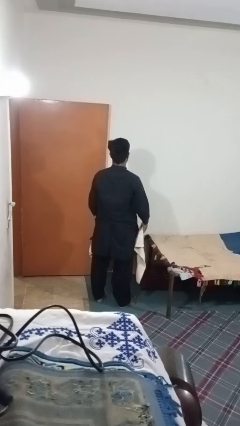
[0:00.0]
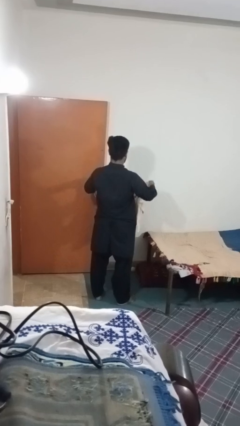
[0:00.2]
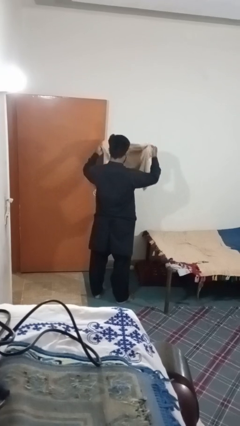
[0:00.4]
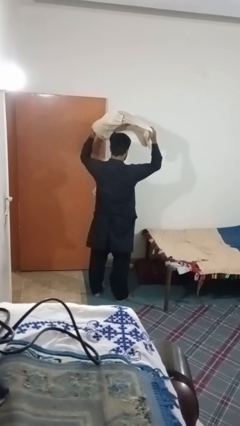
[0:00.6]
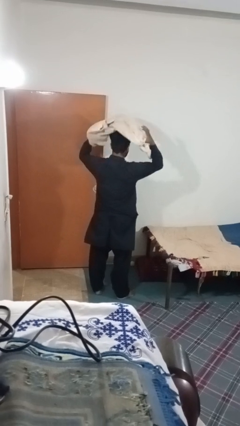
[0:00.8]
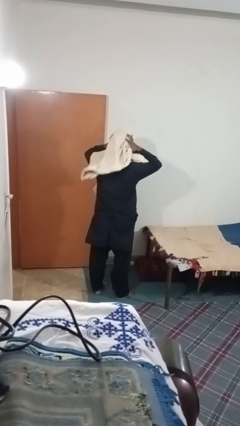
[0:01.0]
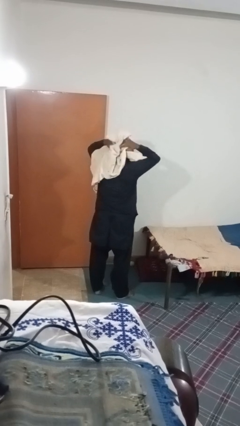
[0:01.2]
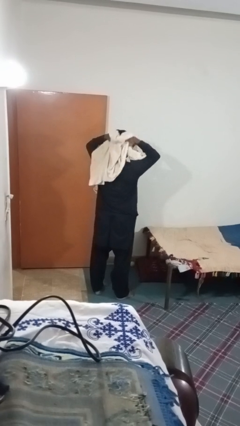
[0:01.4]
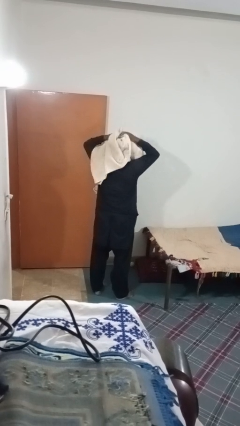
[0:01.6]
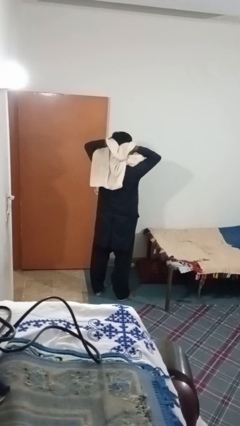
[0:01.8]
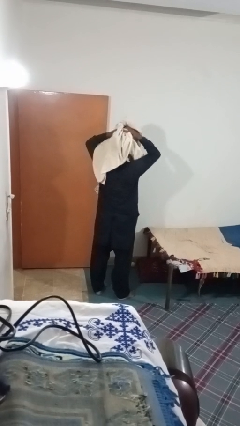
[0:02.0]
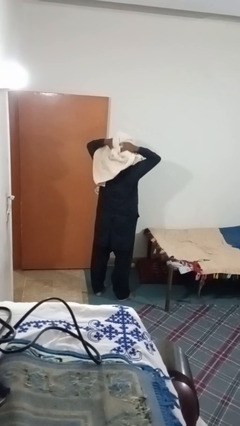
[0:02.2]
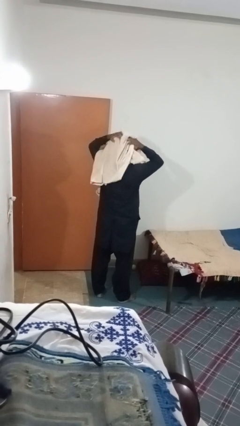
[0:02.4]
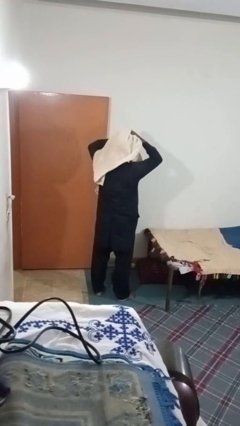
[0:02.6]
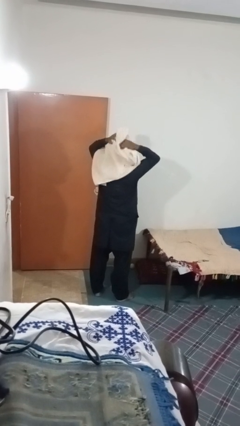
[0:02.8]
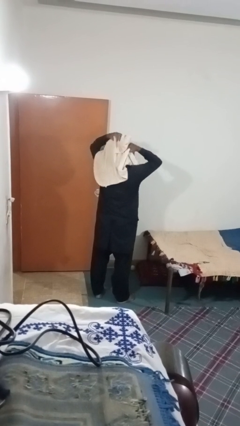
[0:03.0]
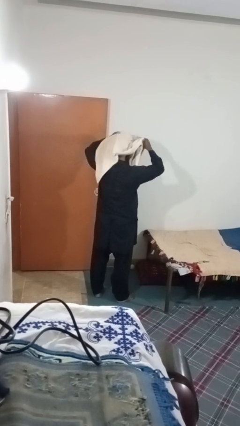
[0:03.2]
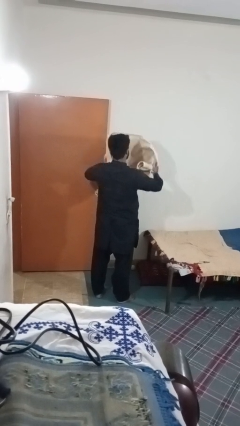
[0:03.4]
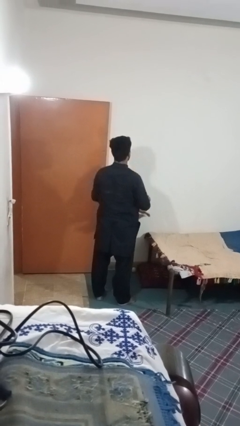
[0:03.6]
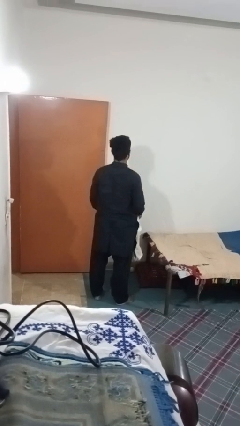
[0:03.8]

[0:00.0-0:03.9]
person dries hair with towel

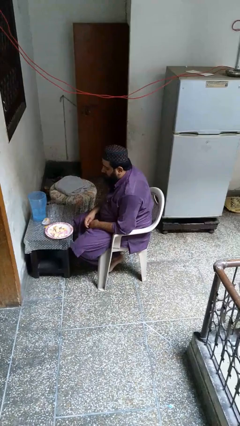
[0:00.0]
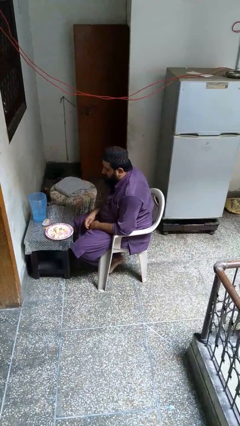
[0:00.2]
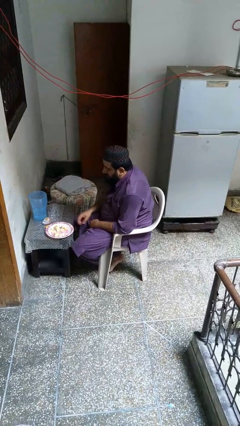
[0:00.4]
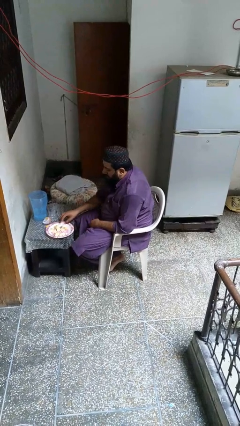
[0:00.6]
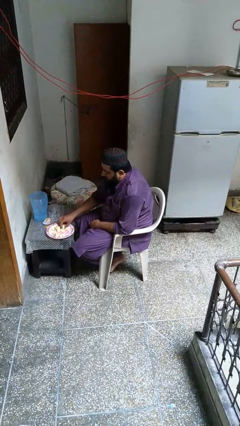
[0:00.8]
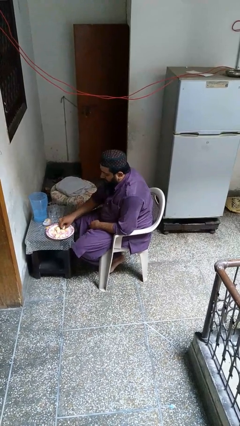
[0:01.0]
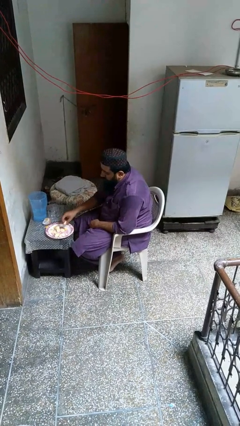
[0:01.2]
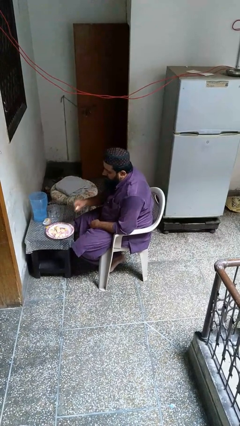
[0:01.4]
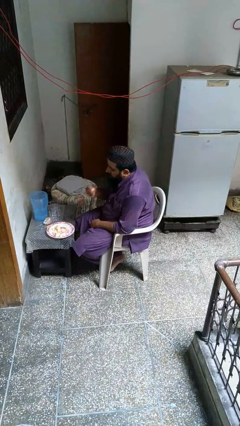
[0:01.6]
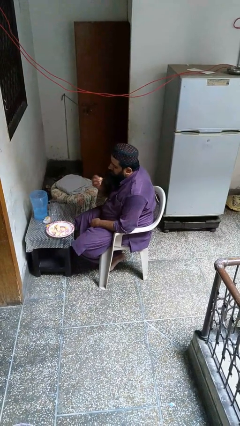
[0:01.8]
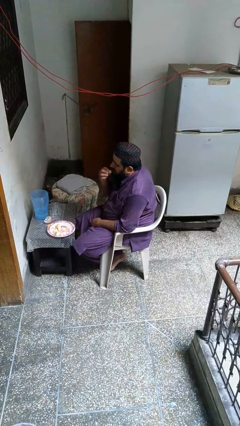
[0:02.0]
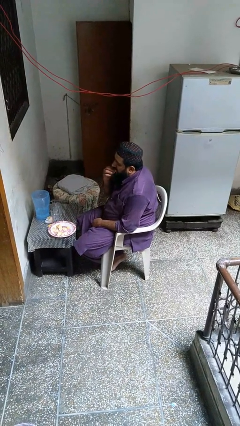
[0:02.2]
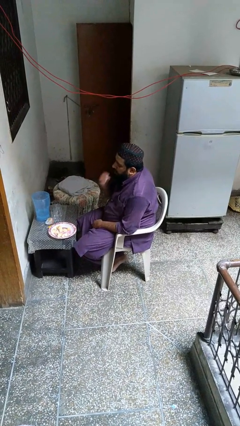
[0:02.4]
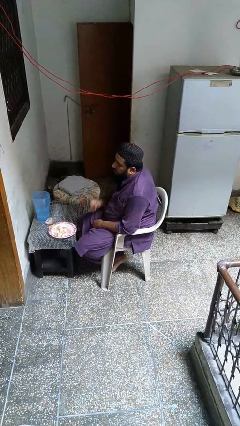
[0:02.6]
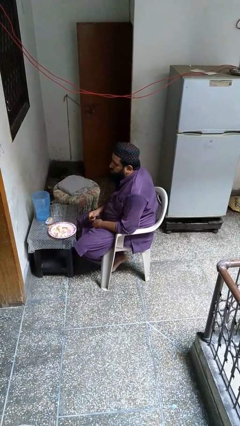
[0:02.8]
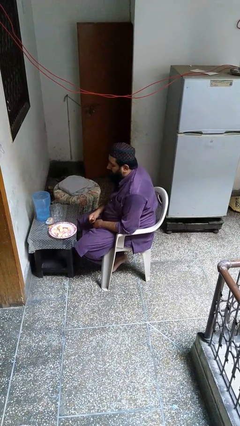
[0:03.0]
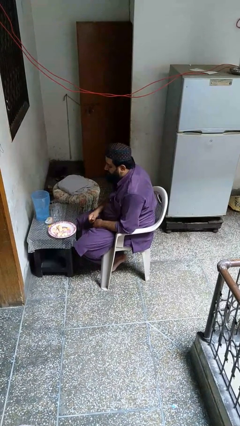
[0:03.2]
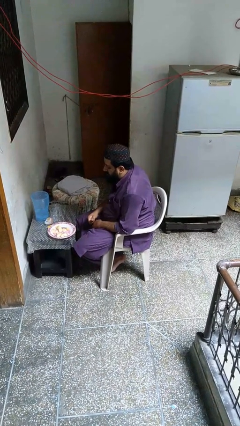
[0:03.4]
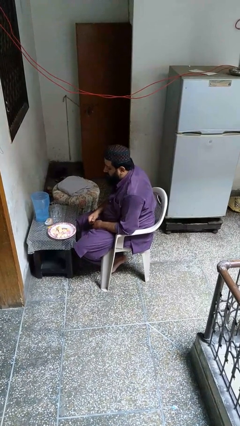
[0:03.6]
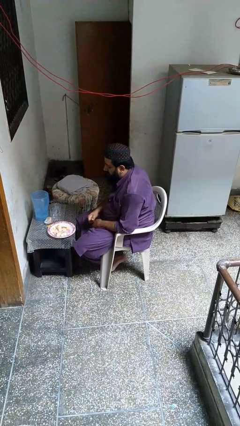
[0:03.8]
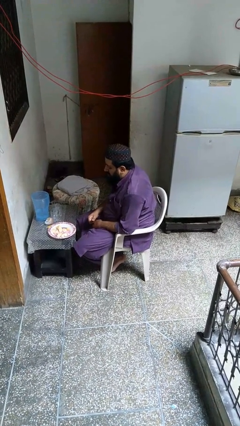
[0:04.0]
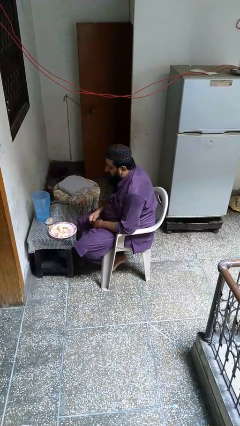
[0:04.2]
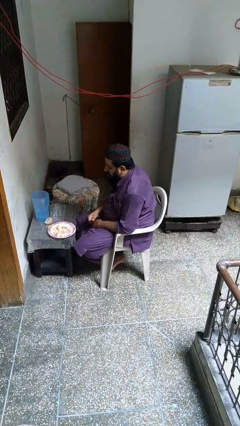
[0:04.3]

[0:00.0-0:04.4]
person eats with hands

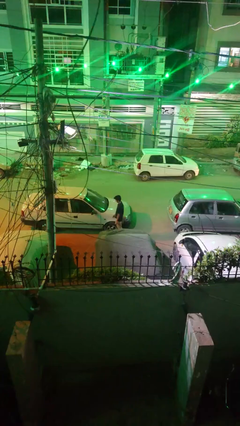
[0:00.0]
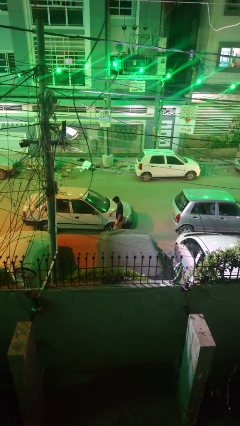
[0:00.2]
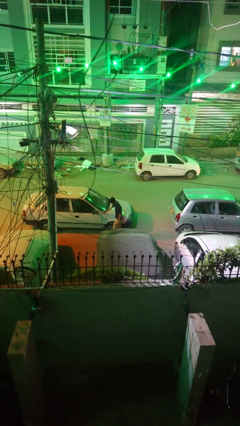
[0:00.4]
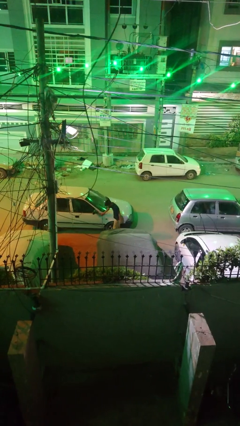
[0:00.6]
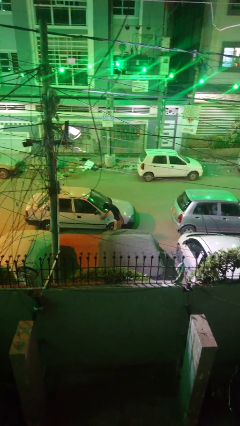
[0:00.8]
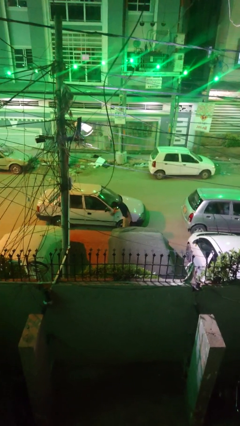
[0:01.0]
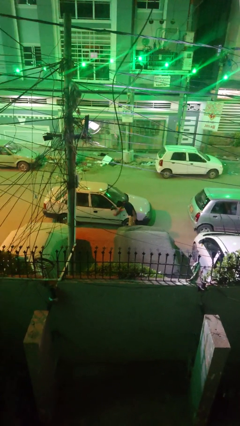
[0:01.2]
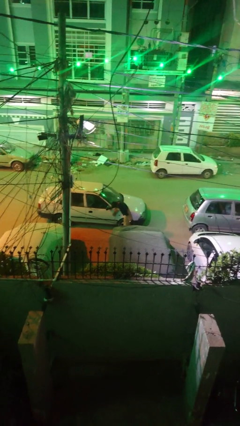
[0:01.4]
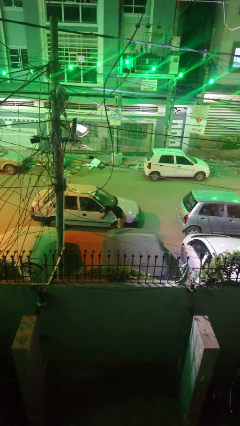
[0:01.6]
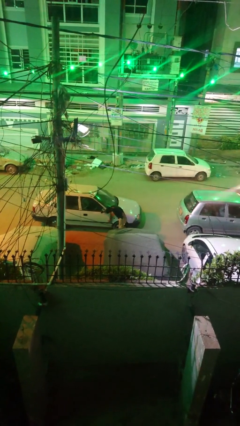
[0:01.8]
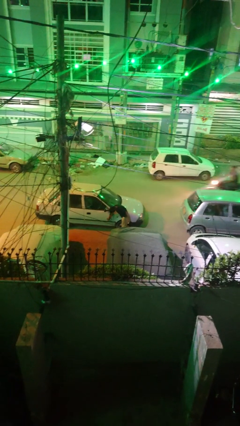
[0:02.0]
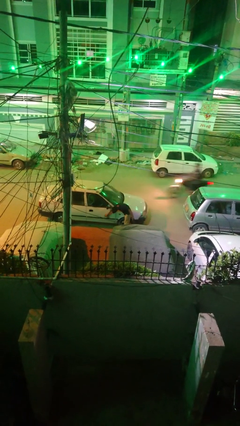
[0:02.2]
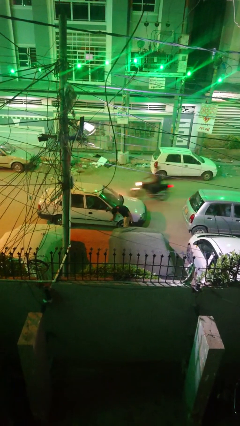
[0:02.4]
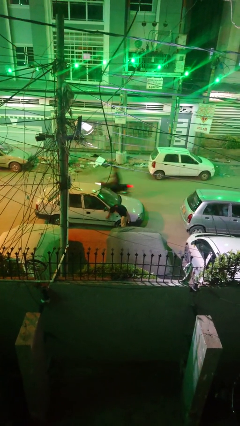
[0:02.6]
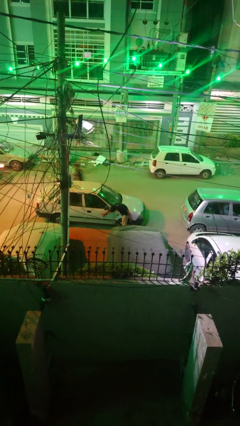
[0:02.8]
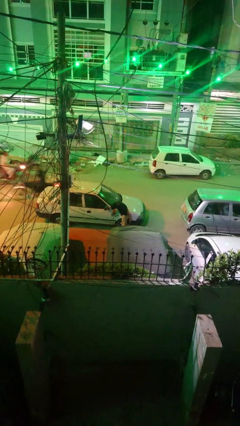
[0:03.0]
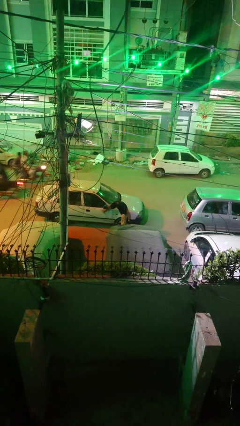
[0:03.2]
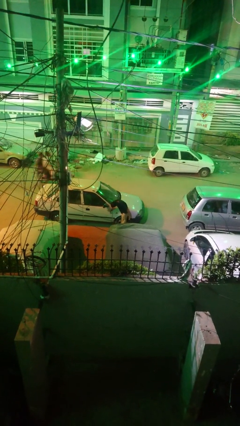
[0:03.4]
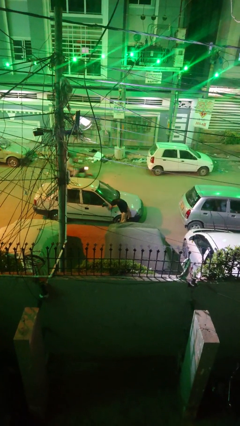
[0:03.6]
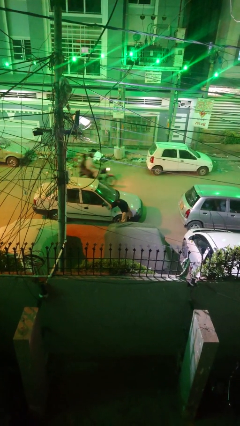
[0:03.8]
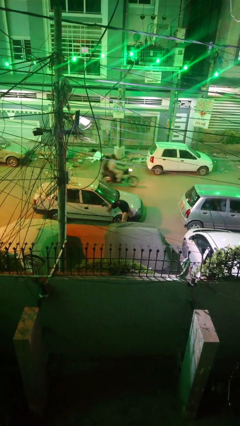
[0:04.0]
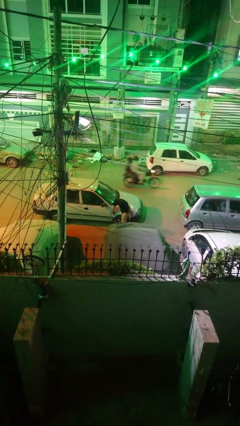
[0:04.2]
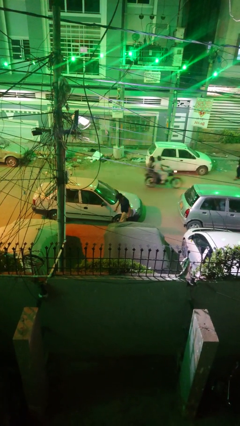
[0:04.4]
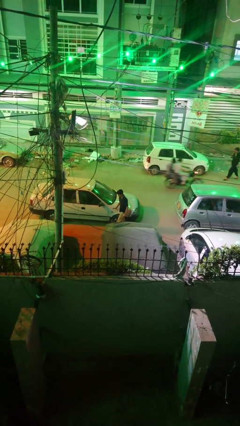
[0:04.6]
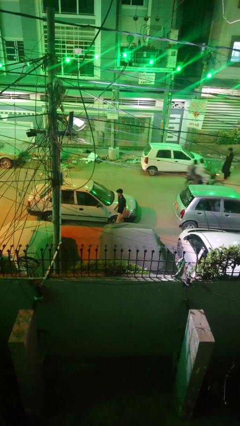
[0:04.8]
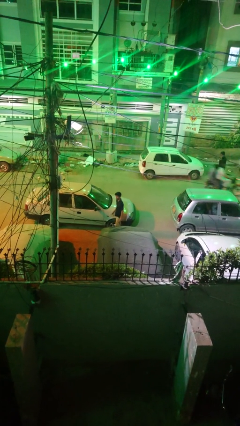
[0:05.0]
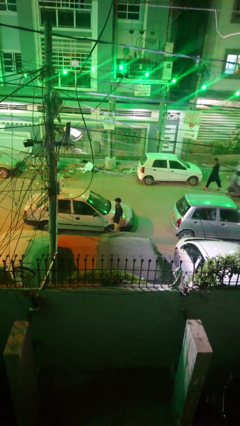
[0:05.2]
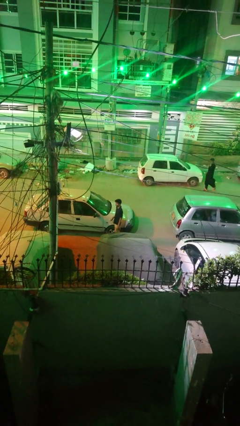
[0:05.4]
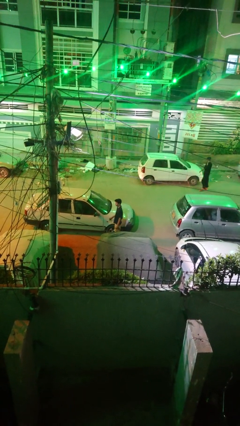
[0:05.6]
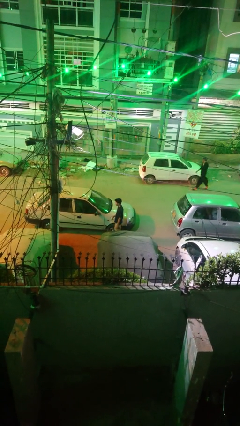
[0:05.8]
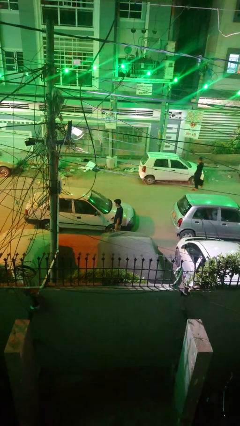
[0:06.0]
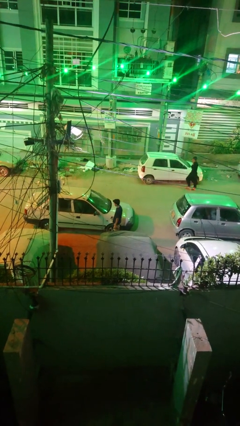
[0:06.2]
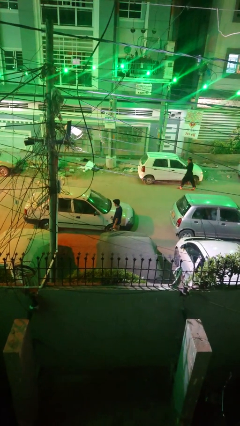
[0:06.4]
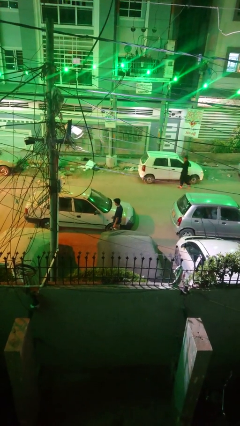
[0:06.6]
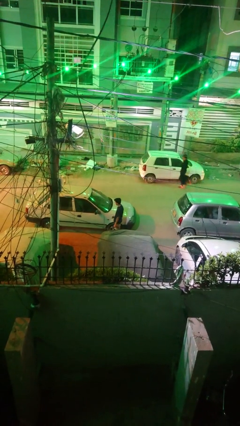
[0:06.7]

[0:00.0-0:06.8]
person polishes car with rag

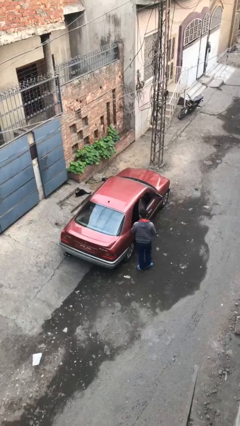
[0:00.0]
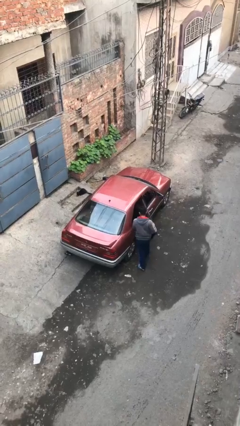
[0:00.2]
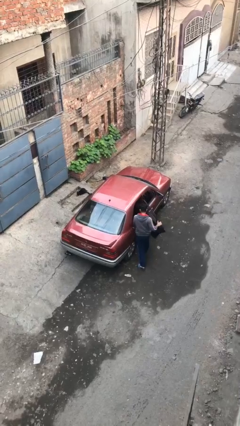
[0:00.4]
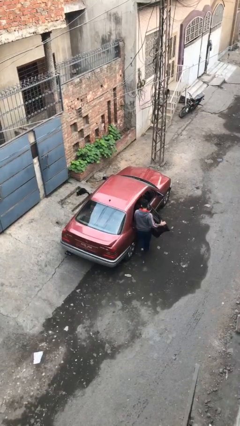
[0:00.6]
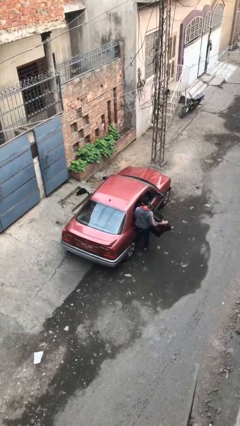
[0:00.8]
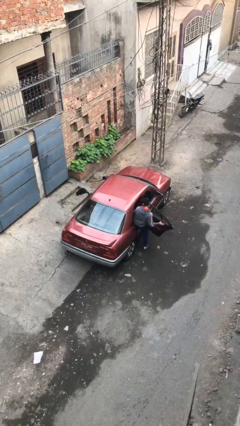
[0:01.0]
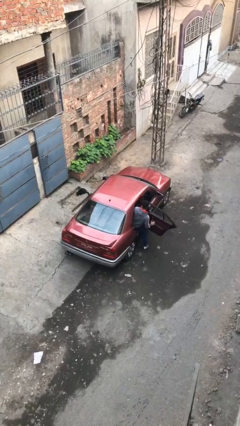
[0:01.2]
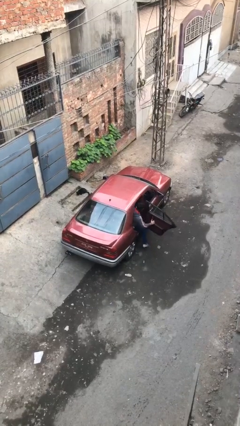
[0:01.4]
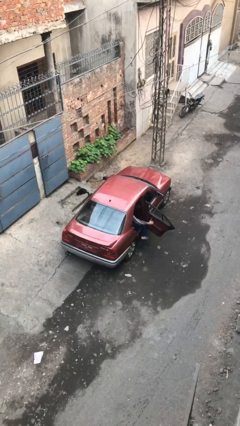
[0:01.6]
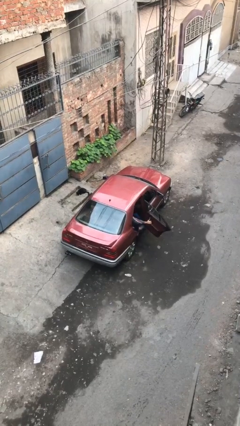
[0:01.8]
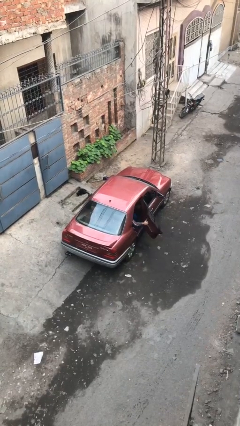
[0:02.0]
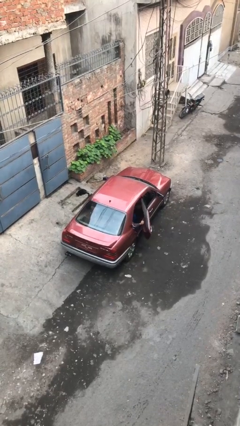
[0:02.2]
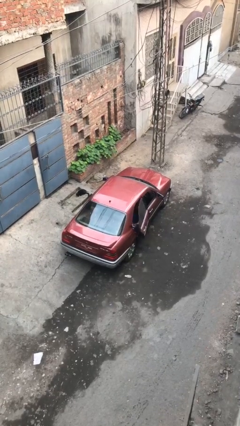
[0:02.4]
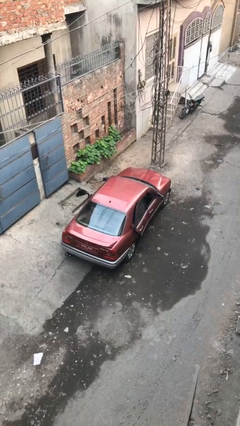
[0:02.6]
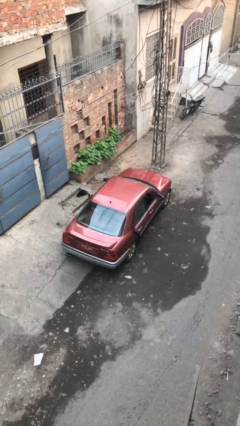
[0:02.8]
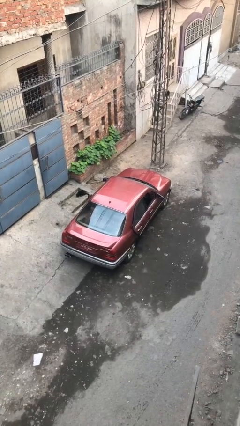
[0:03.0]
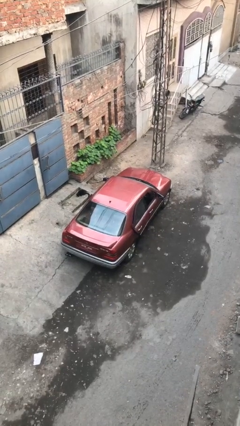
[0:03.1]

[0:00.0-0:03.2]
car picks up person
